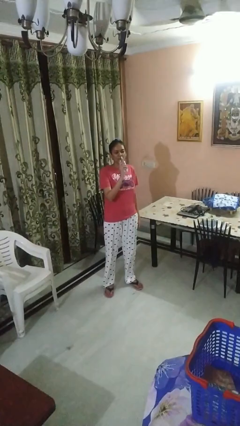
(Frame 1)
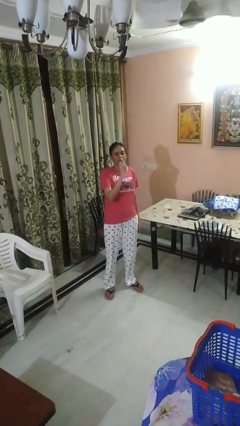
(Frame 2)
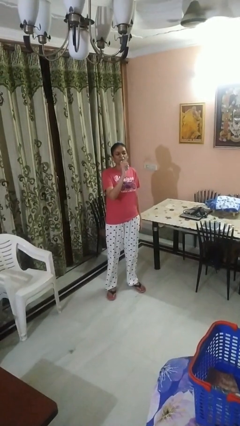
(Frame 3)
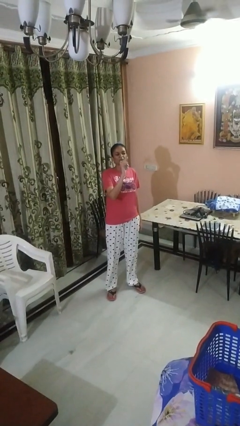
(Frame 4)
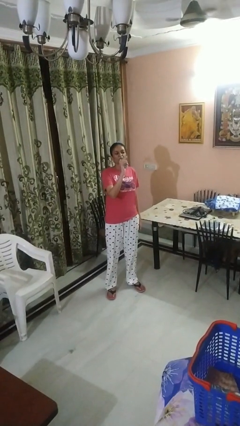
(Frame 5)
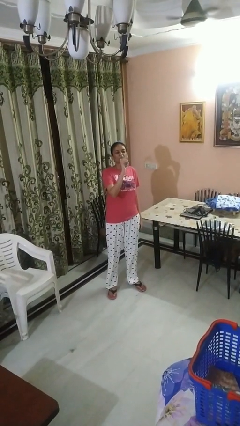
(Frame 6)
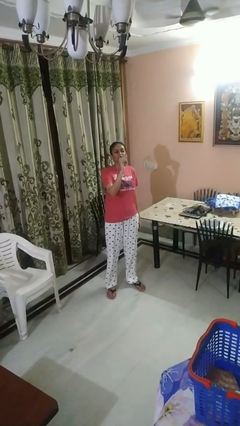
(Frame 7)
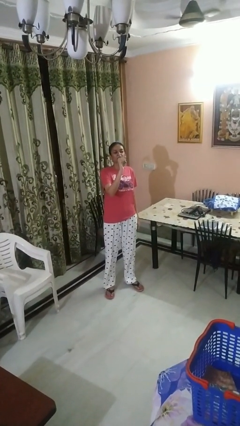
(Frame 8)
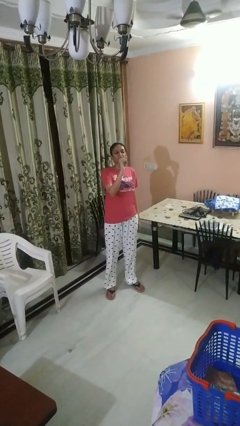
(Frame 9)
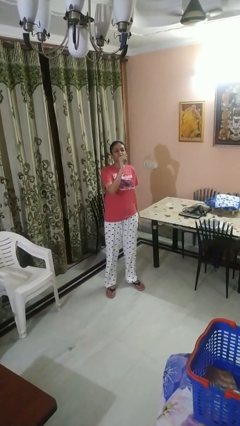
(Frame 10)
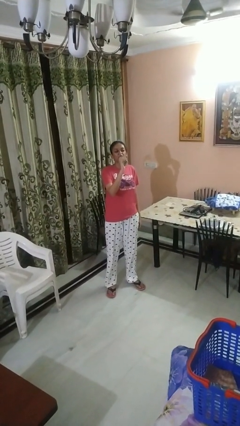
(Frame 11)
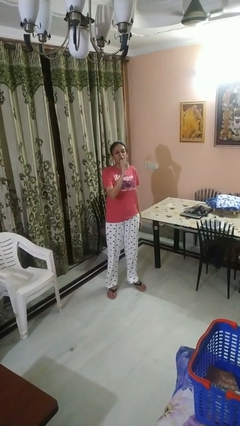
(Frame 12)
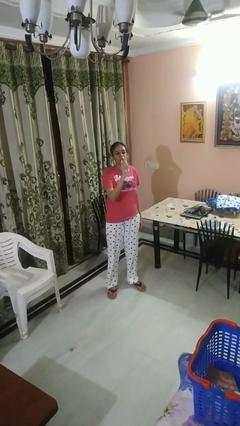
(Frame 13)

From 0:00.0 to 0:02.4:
person drinks from bottle

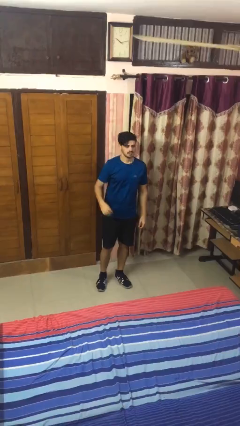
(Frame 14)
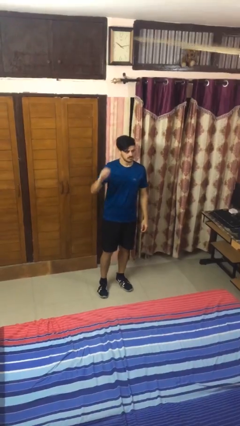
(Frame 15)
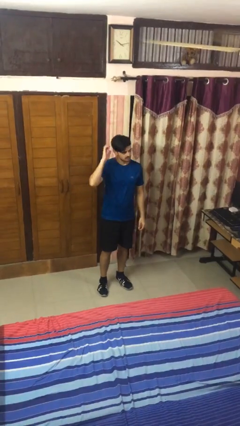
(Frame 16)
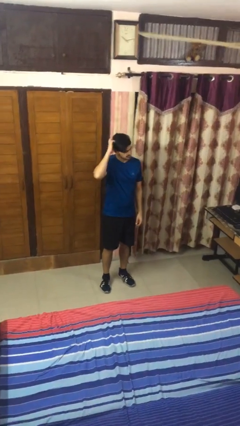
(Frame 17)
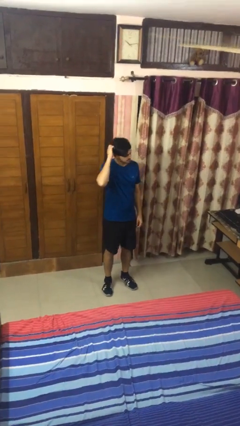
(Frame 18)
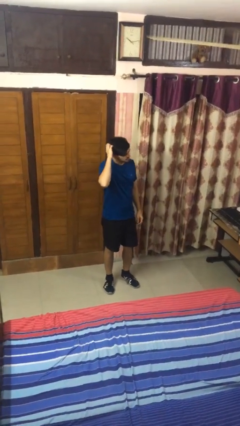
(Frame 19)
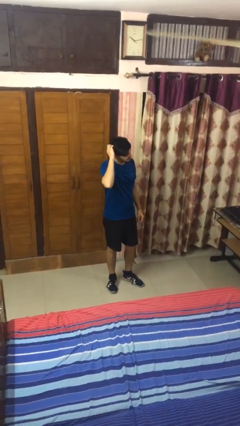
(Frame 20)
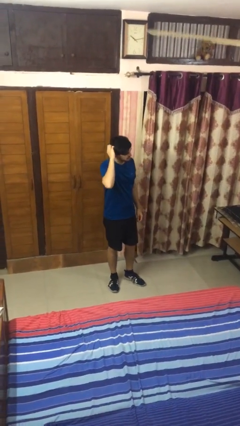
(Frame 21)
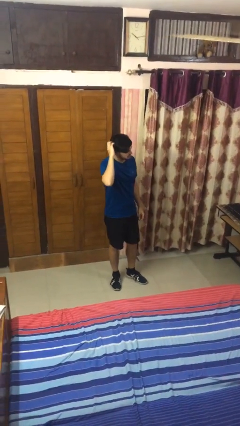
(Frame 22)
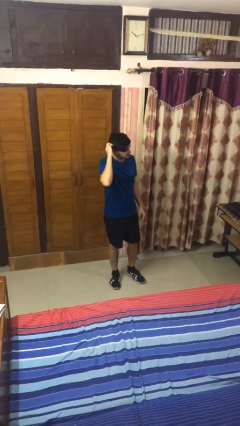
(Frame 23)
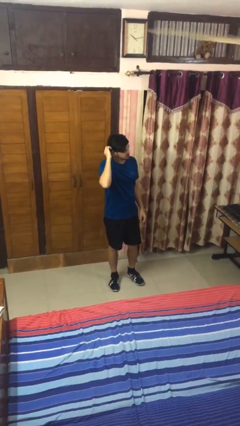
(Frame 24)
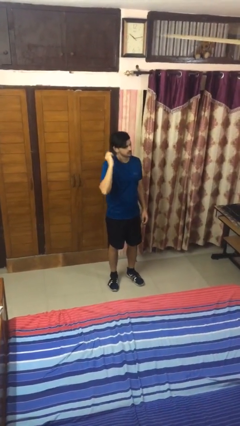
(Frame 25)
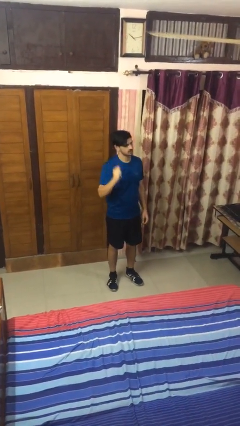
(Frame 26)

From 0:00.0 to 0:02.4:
person scratches face

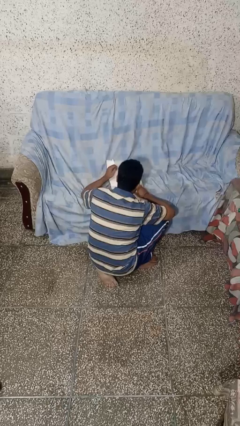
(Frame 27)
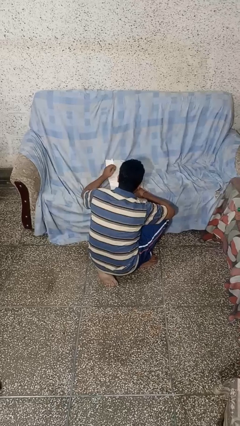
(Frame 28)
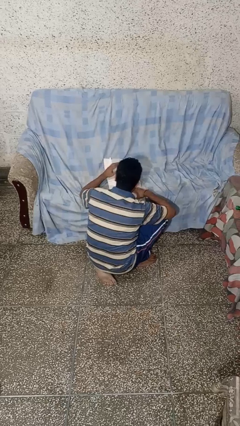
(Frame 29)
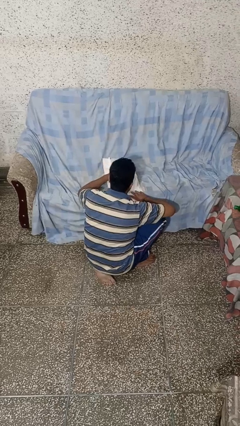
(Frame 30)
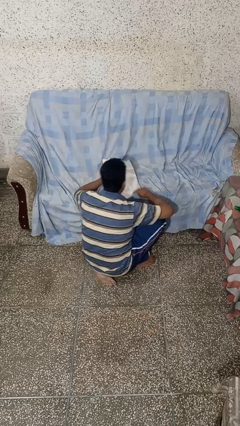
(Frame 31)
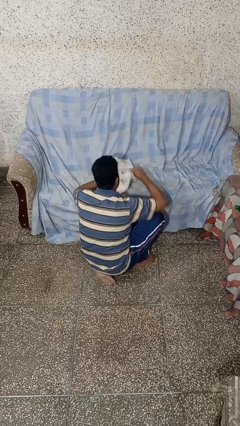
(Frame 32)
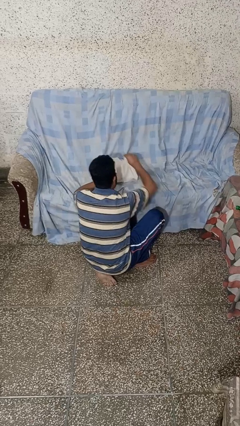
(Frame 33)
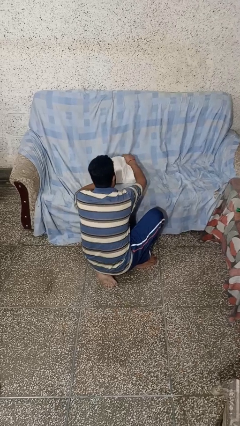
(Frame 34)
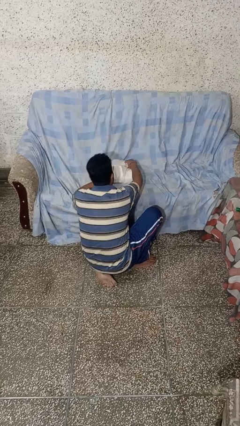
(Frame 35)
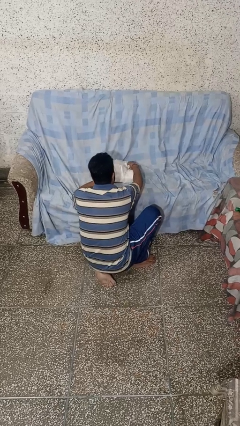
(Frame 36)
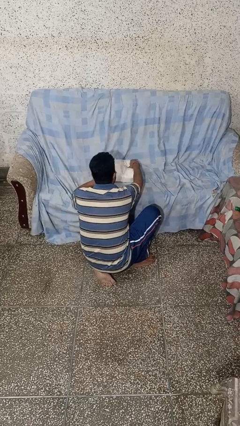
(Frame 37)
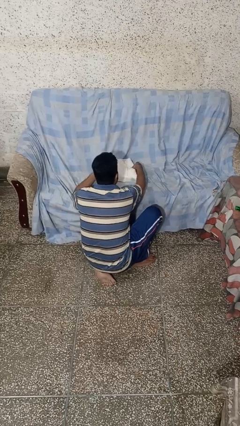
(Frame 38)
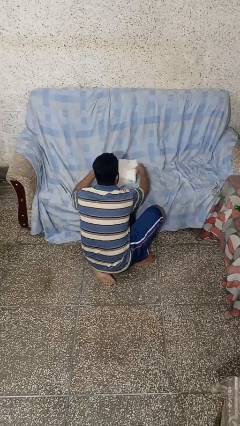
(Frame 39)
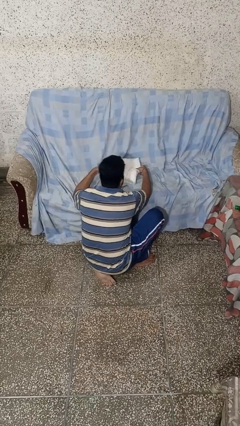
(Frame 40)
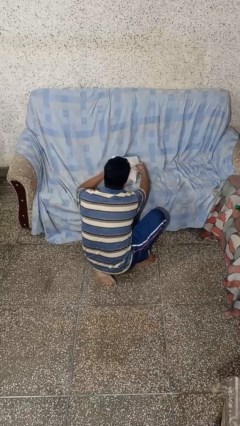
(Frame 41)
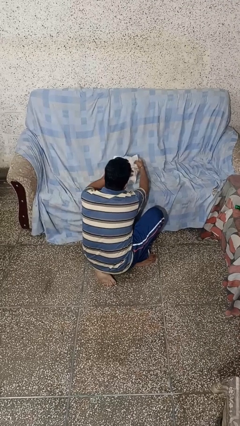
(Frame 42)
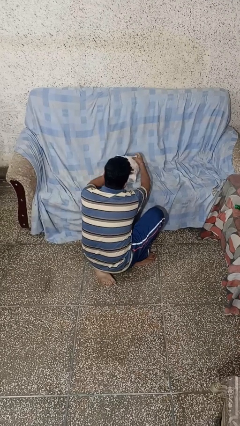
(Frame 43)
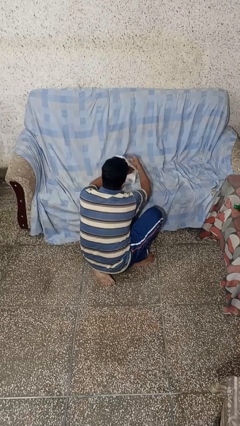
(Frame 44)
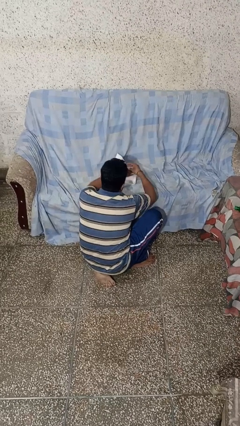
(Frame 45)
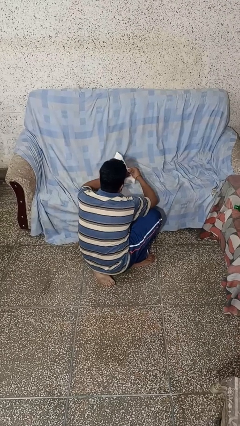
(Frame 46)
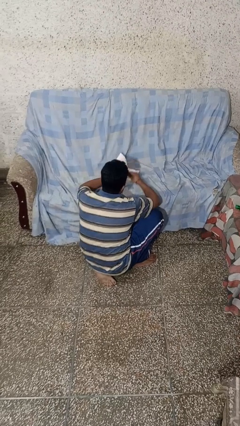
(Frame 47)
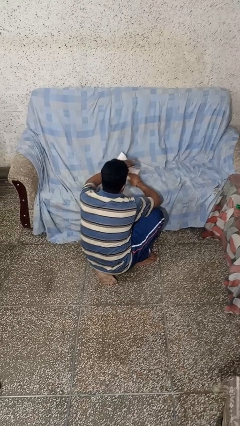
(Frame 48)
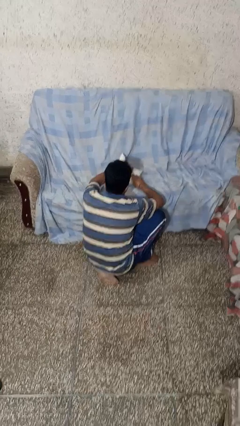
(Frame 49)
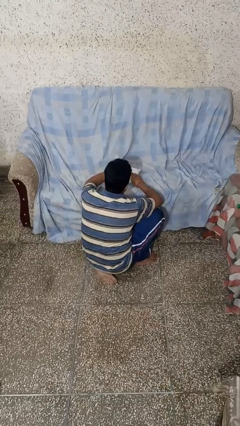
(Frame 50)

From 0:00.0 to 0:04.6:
person wraps box

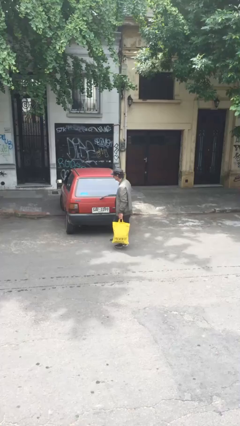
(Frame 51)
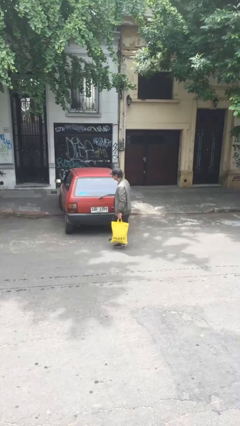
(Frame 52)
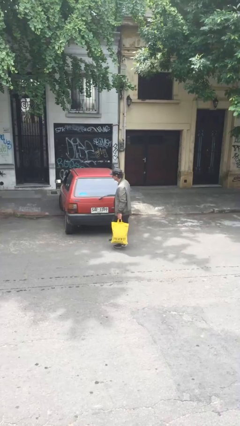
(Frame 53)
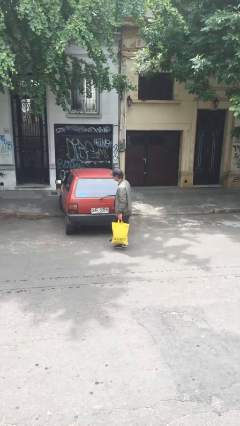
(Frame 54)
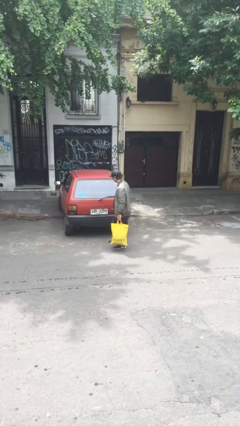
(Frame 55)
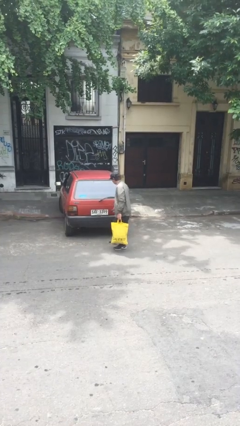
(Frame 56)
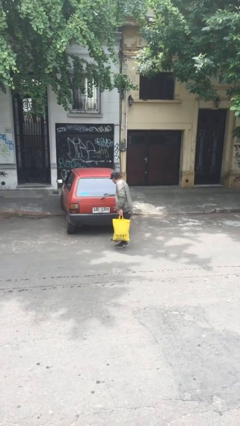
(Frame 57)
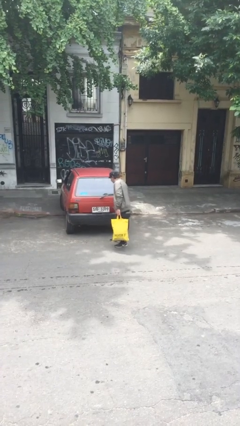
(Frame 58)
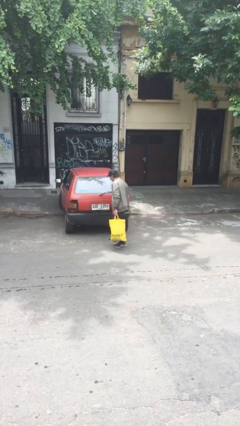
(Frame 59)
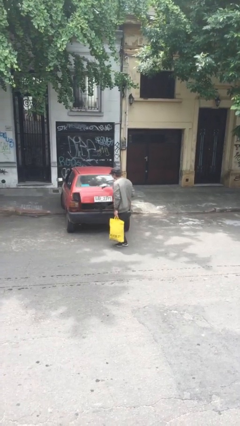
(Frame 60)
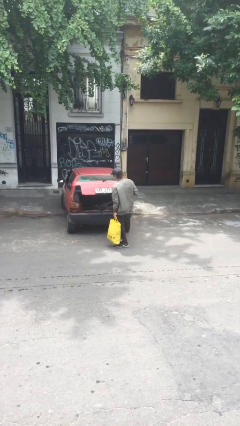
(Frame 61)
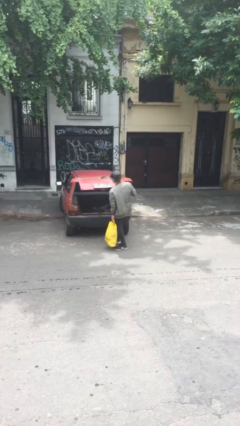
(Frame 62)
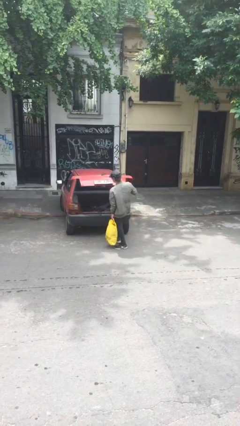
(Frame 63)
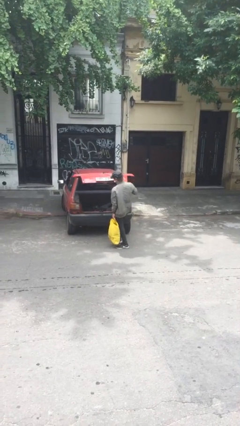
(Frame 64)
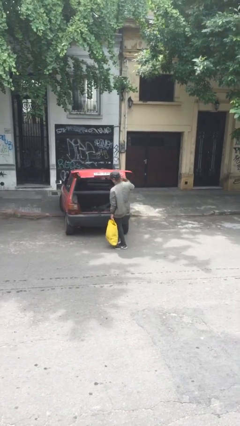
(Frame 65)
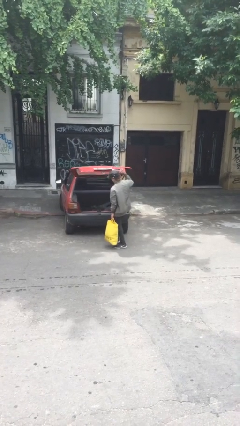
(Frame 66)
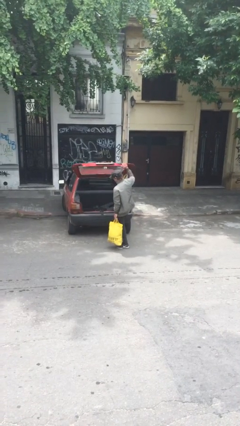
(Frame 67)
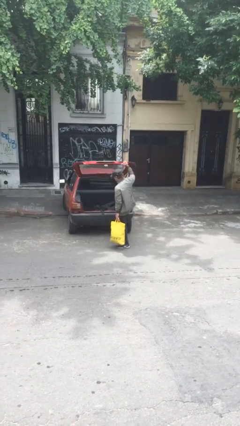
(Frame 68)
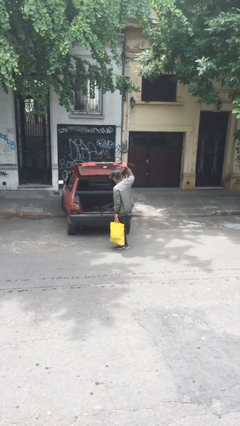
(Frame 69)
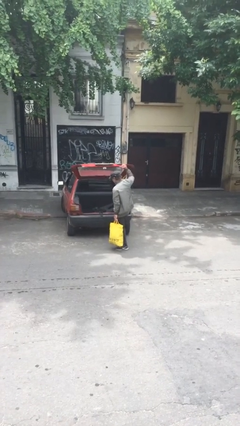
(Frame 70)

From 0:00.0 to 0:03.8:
person opens car trunk

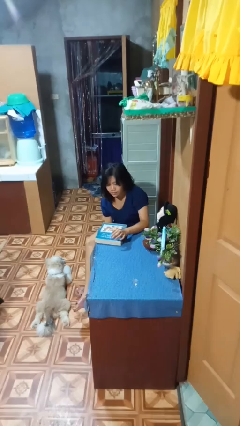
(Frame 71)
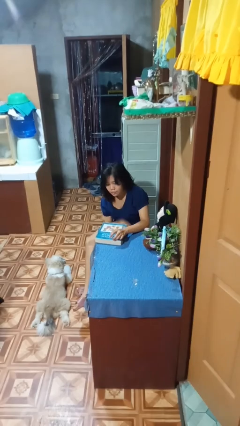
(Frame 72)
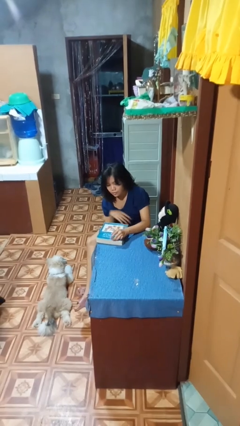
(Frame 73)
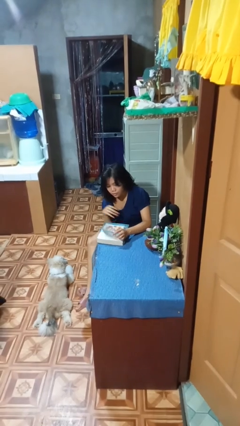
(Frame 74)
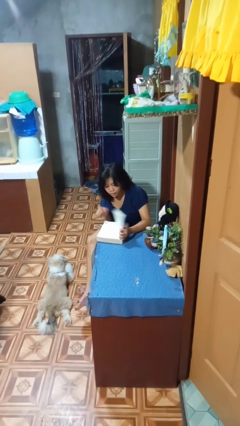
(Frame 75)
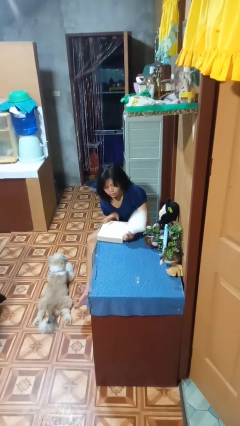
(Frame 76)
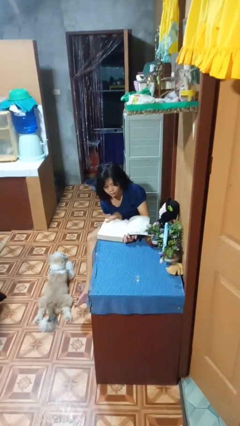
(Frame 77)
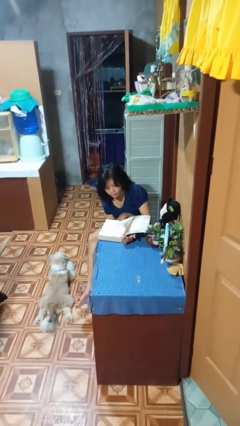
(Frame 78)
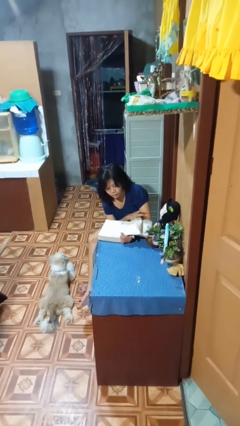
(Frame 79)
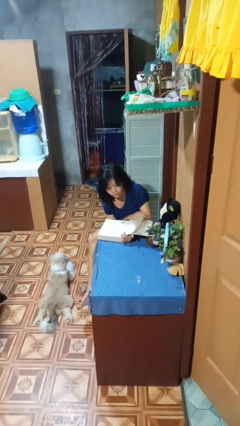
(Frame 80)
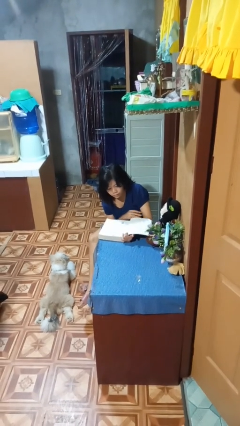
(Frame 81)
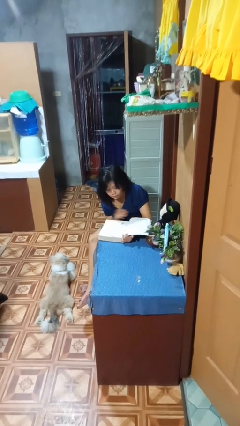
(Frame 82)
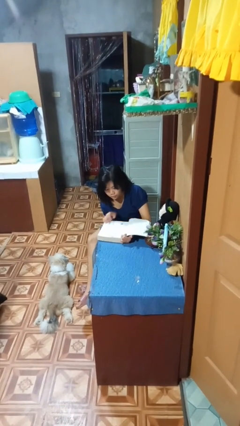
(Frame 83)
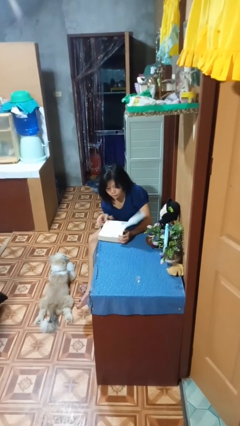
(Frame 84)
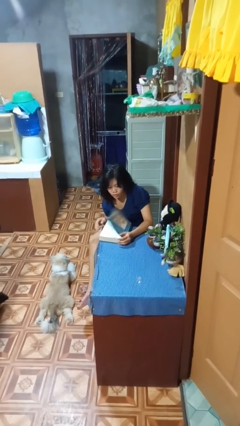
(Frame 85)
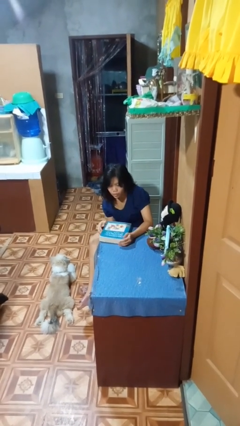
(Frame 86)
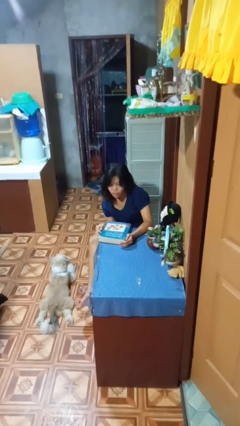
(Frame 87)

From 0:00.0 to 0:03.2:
person reads book

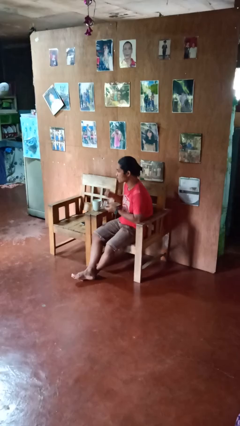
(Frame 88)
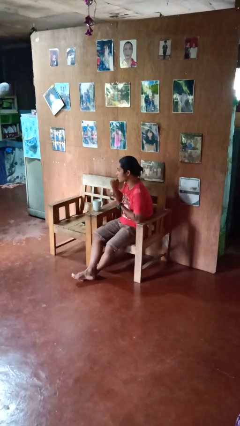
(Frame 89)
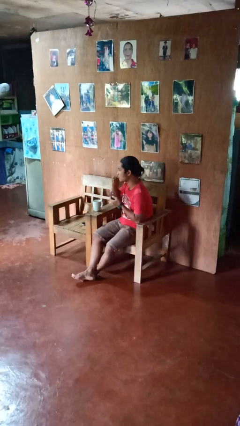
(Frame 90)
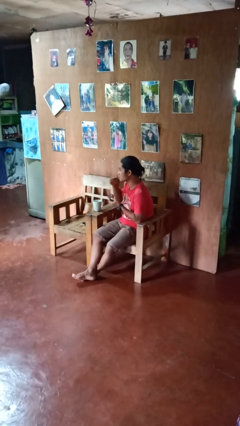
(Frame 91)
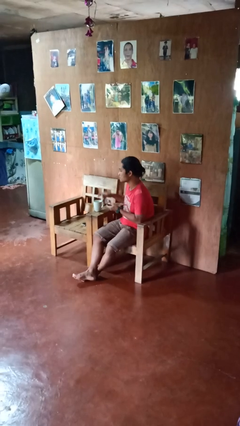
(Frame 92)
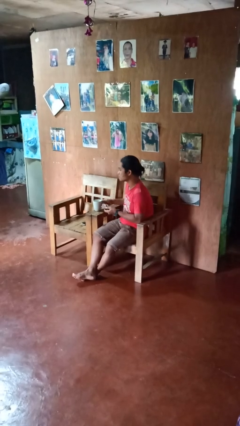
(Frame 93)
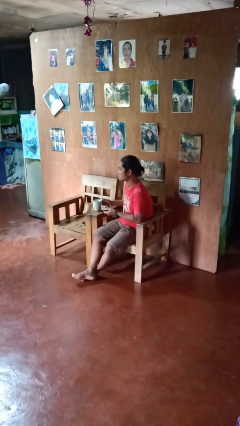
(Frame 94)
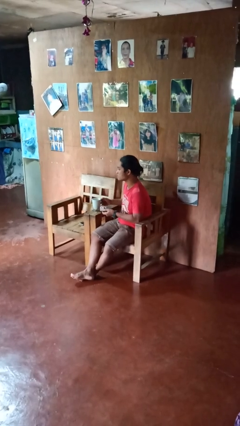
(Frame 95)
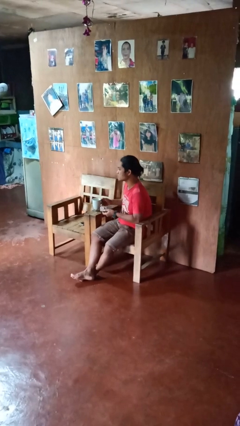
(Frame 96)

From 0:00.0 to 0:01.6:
person takes medicine pills
